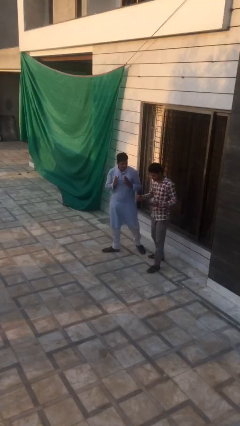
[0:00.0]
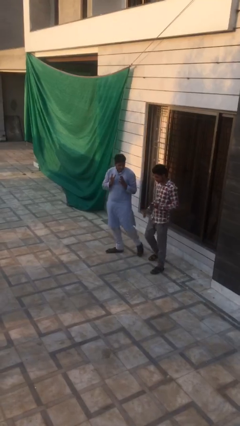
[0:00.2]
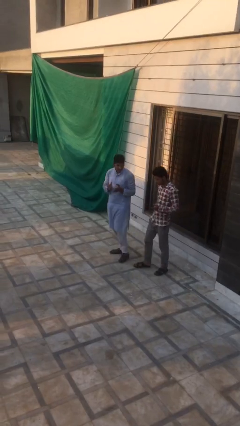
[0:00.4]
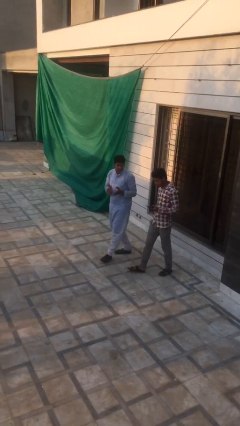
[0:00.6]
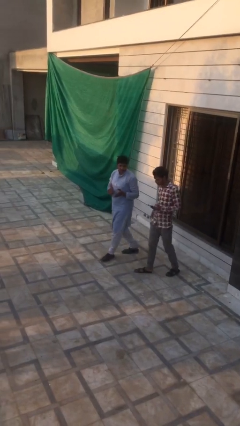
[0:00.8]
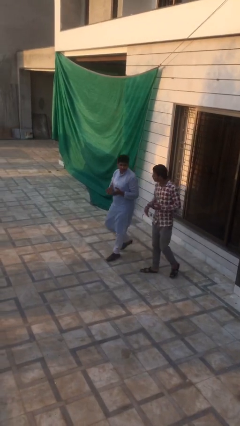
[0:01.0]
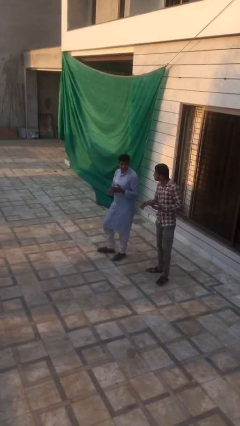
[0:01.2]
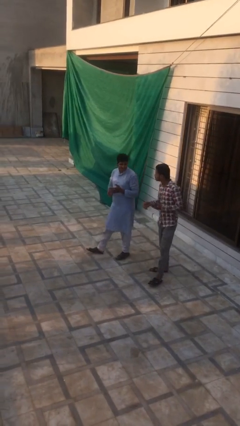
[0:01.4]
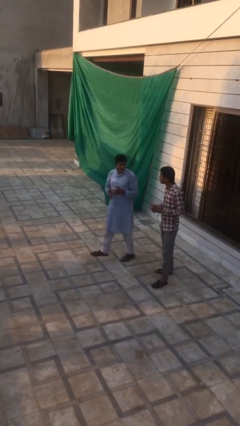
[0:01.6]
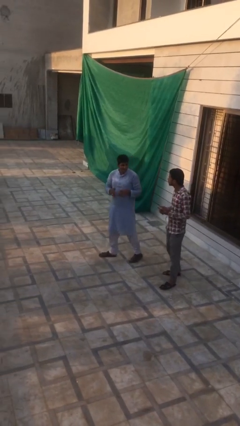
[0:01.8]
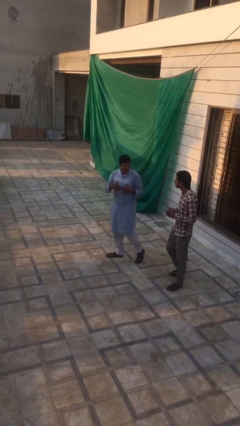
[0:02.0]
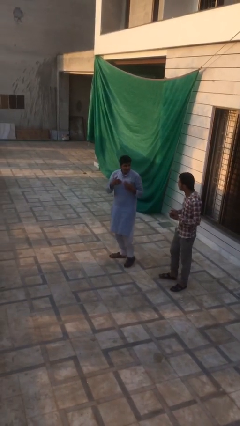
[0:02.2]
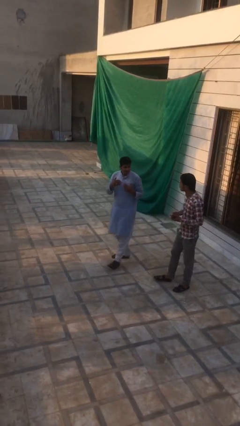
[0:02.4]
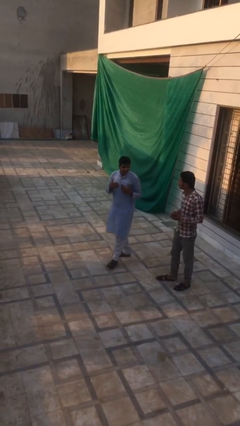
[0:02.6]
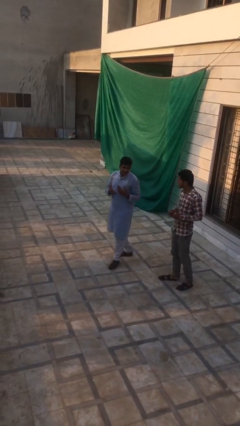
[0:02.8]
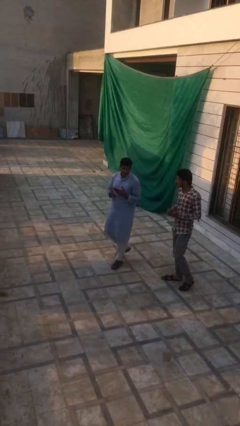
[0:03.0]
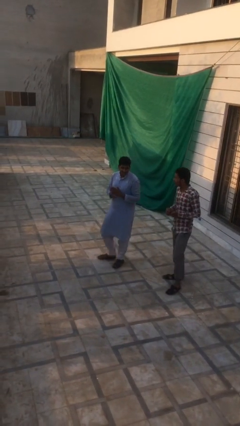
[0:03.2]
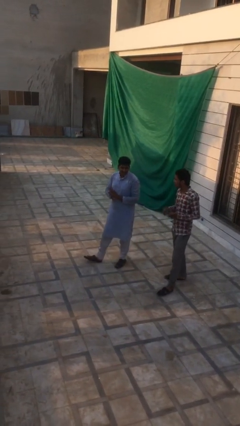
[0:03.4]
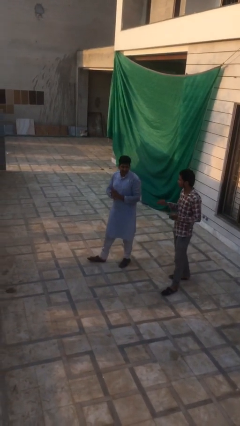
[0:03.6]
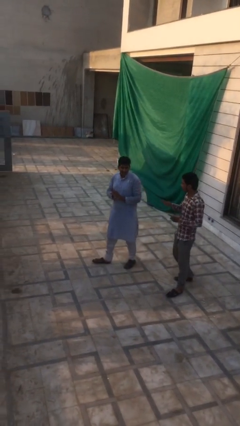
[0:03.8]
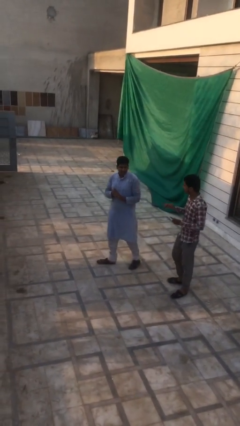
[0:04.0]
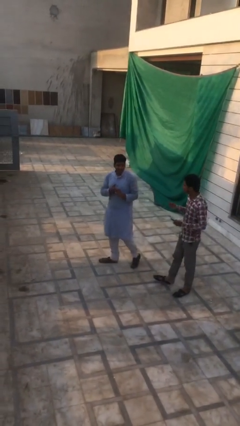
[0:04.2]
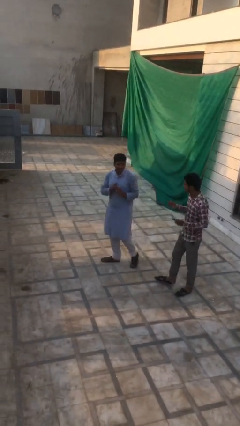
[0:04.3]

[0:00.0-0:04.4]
person talks to person

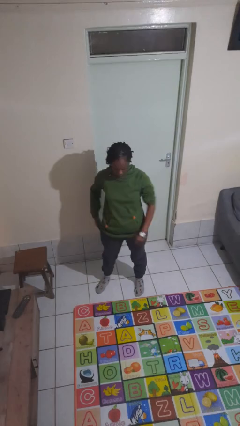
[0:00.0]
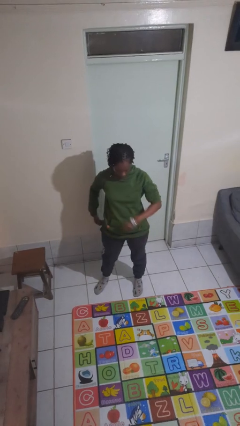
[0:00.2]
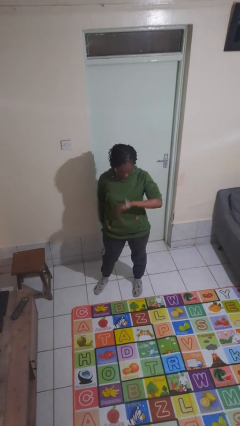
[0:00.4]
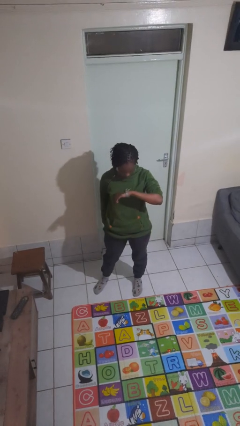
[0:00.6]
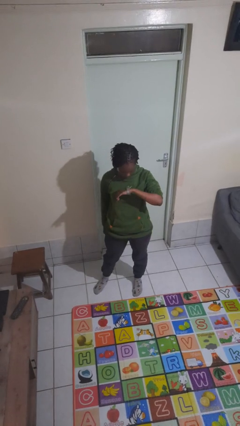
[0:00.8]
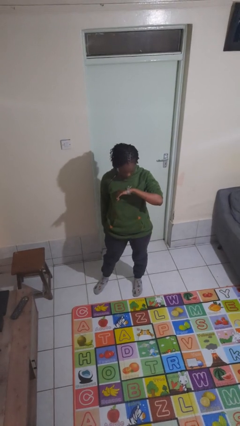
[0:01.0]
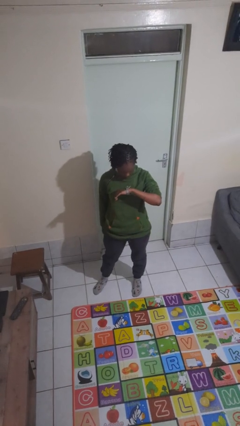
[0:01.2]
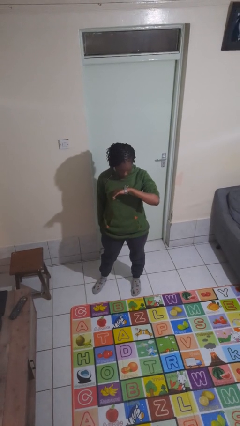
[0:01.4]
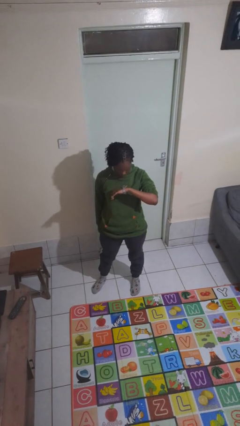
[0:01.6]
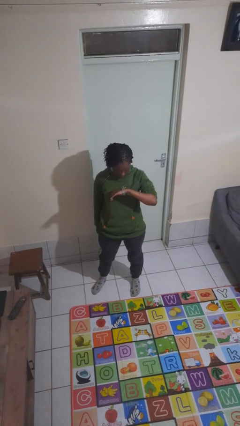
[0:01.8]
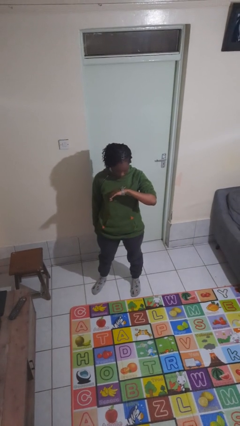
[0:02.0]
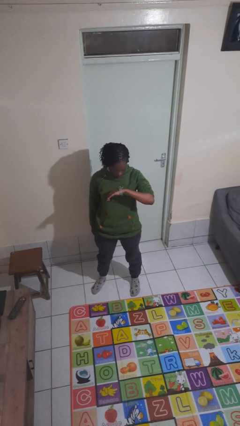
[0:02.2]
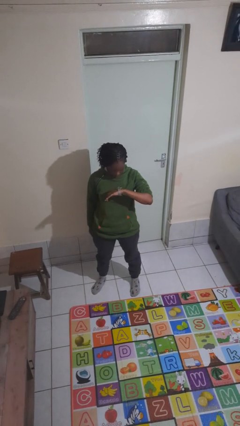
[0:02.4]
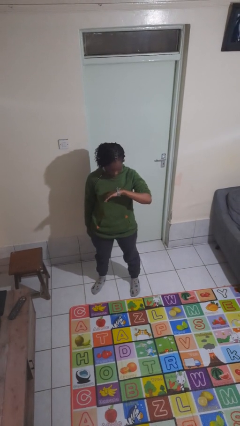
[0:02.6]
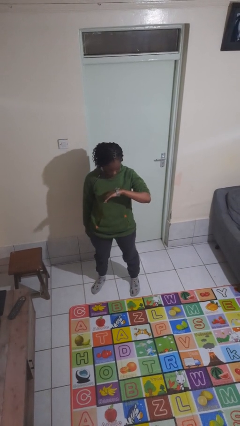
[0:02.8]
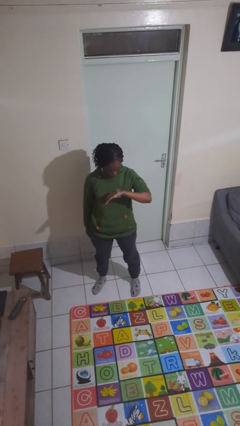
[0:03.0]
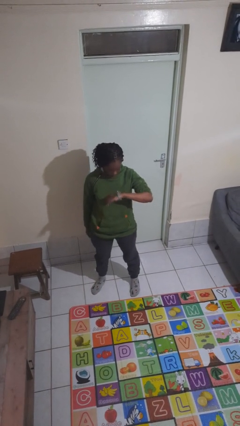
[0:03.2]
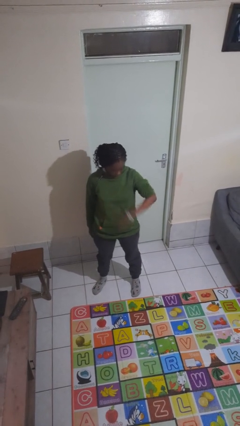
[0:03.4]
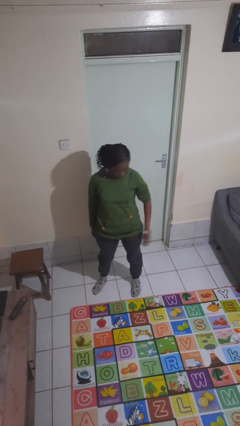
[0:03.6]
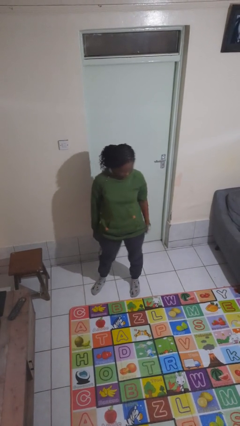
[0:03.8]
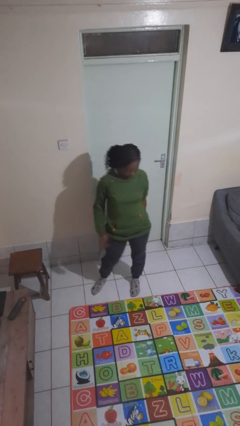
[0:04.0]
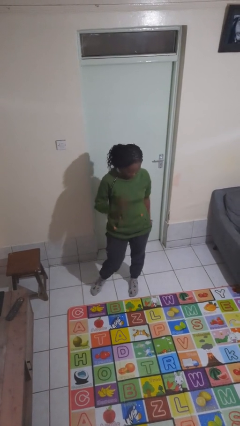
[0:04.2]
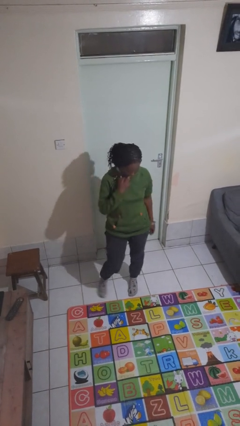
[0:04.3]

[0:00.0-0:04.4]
person looks at wristwatch

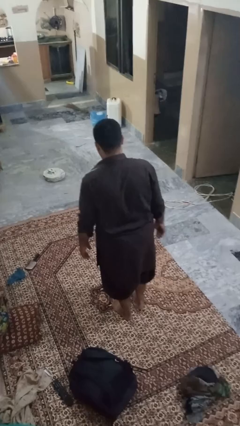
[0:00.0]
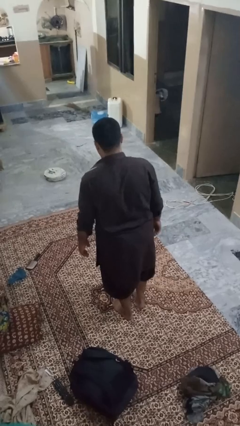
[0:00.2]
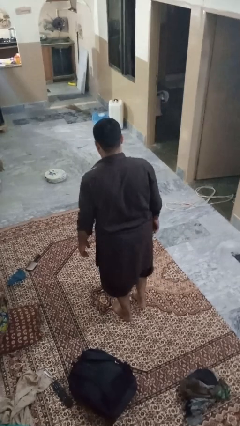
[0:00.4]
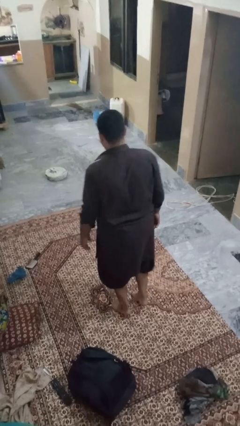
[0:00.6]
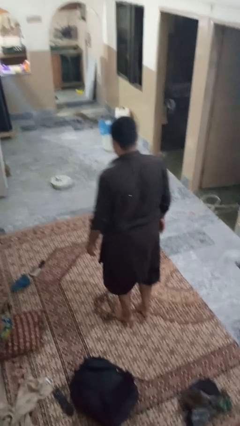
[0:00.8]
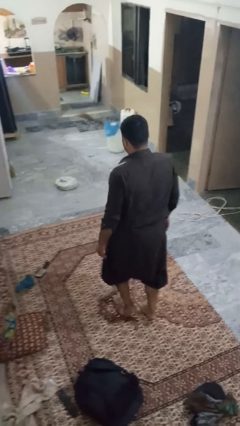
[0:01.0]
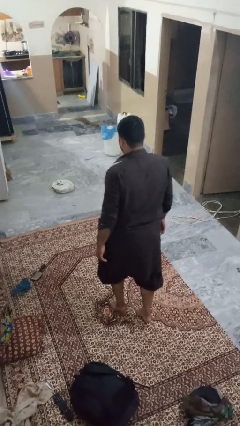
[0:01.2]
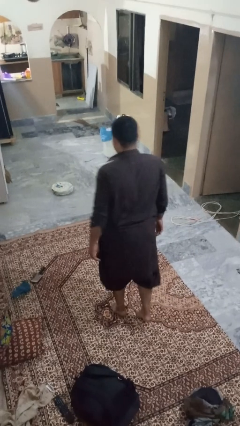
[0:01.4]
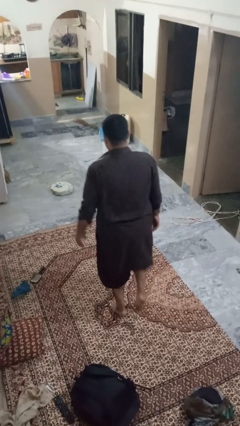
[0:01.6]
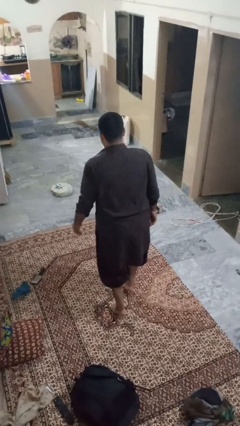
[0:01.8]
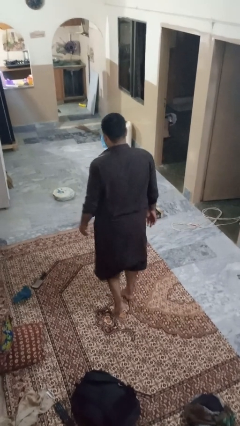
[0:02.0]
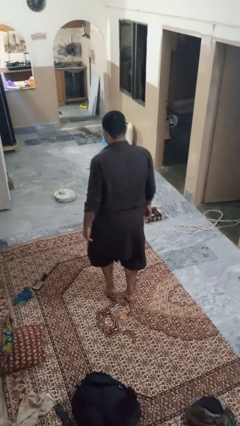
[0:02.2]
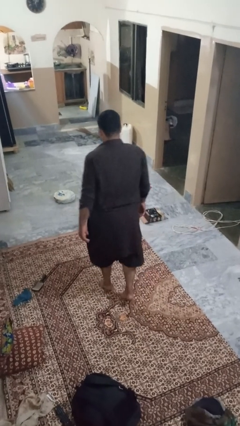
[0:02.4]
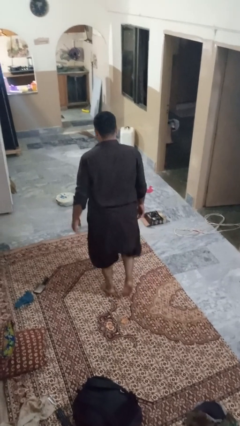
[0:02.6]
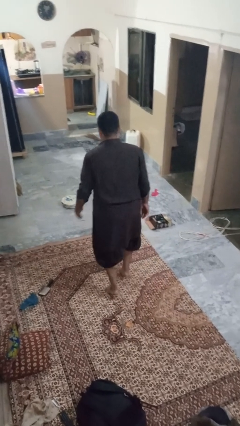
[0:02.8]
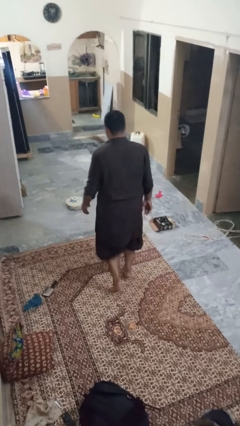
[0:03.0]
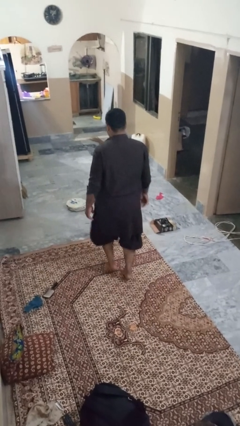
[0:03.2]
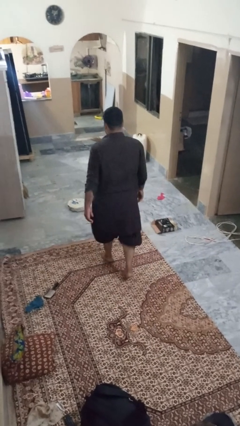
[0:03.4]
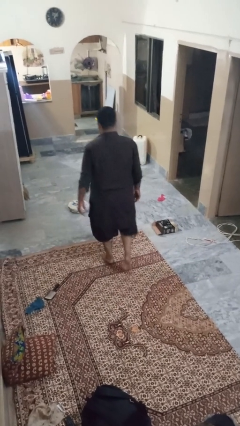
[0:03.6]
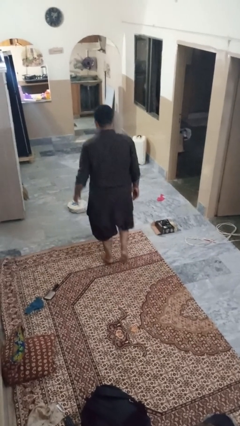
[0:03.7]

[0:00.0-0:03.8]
person walks tiptoe

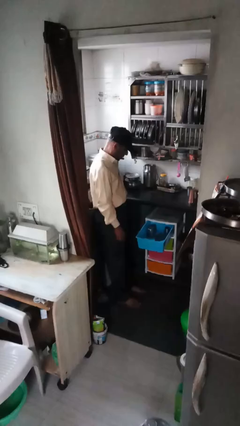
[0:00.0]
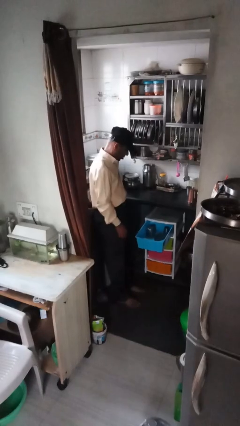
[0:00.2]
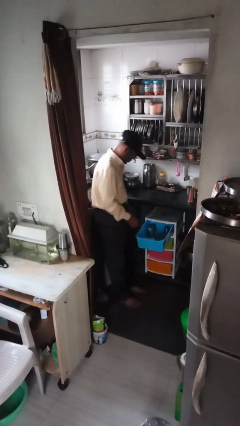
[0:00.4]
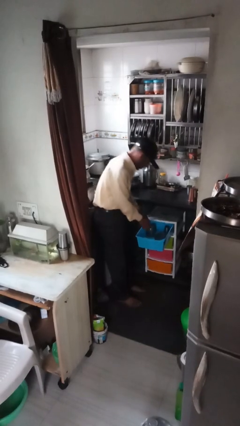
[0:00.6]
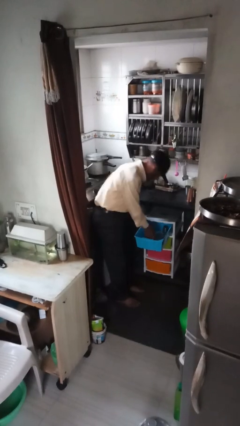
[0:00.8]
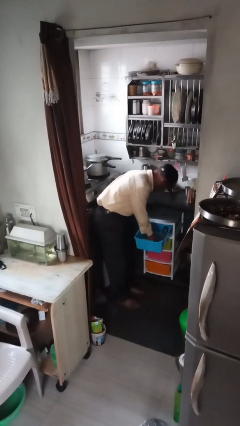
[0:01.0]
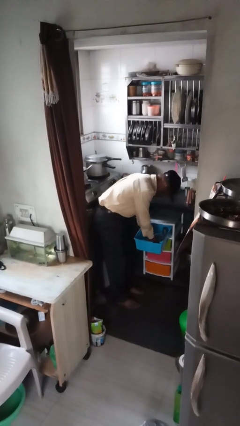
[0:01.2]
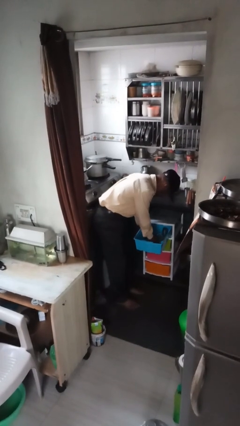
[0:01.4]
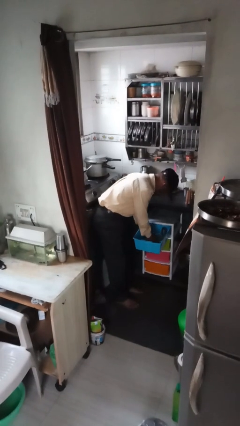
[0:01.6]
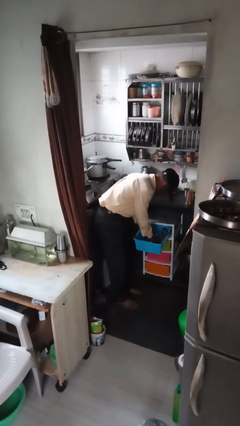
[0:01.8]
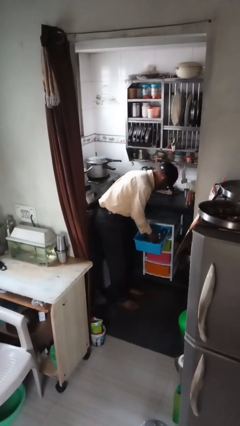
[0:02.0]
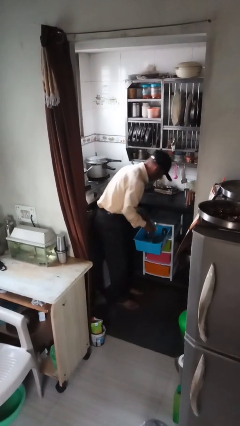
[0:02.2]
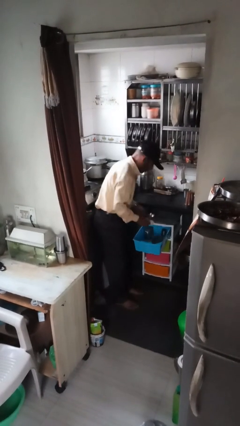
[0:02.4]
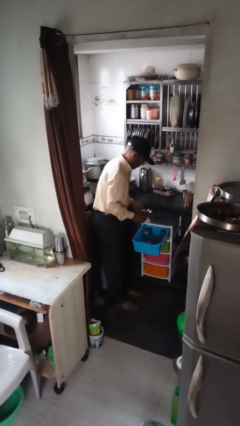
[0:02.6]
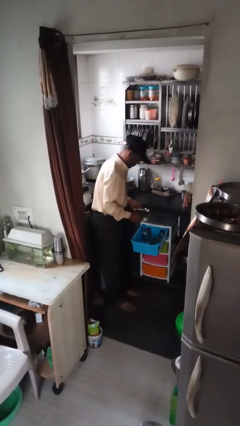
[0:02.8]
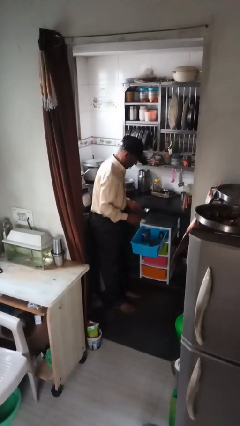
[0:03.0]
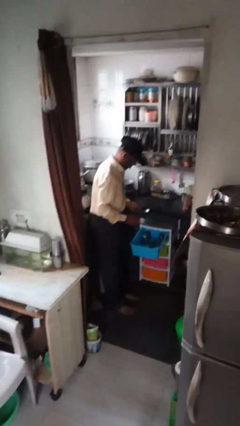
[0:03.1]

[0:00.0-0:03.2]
person takes object from kitchen drawer

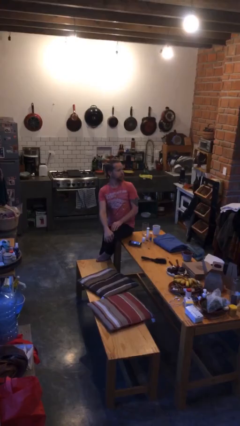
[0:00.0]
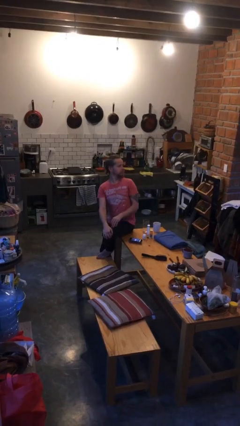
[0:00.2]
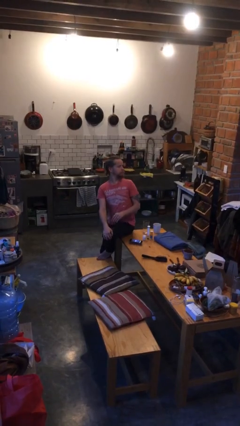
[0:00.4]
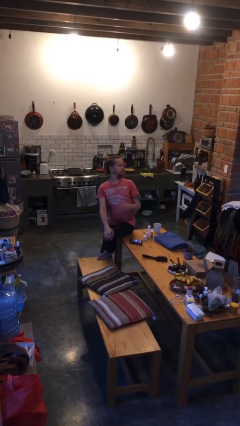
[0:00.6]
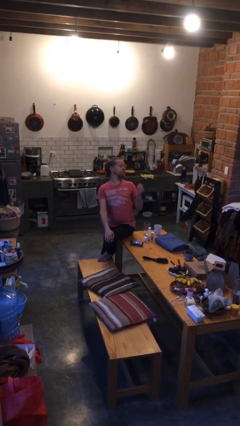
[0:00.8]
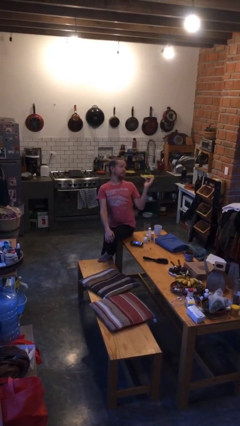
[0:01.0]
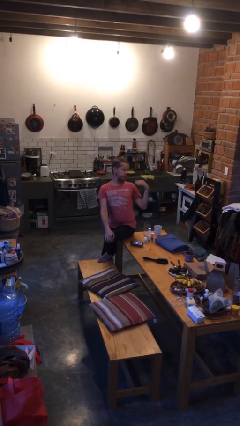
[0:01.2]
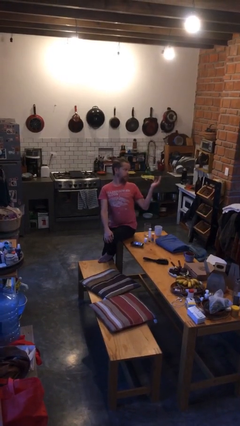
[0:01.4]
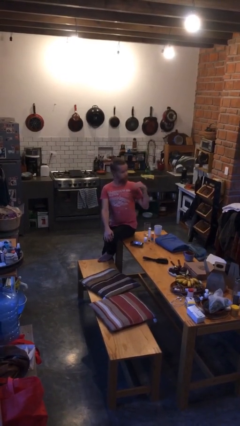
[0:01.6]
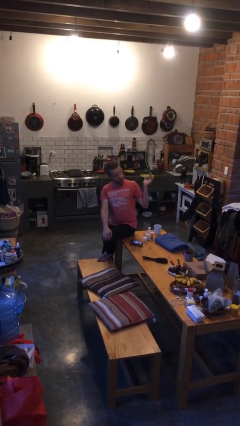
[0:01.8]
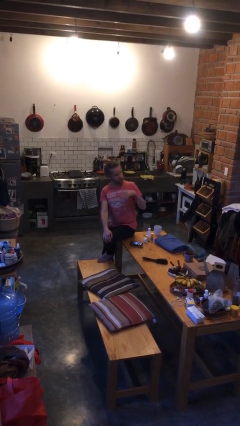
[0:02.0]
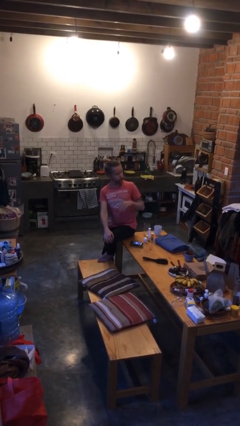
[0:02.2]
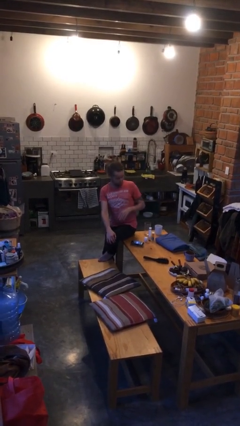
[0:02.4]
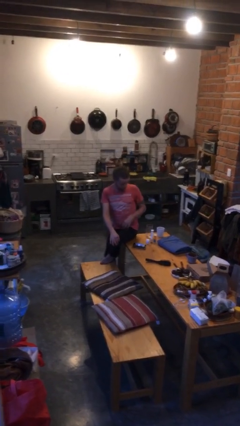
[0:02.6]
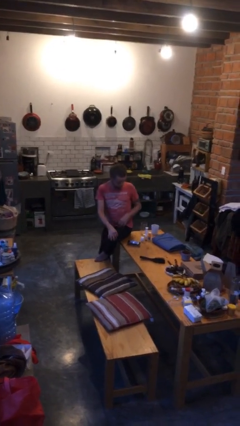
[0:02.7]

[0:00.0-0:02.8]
person gestures come here
